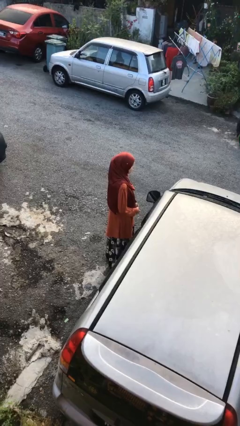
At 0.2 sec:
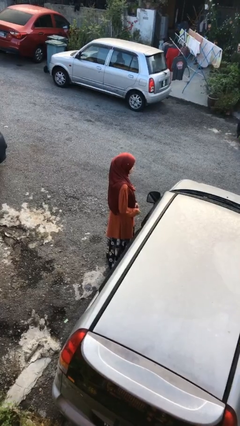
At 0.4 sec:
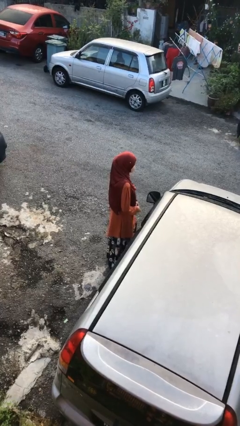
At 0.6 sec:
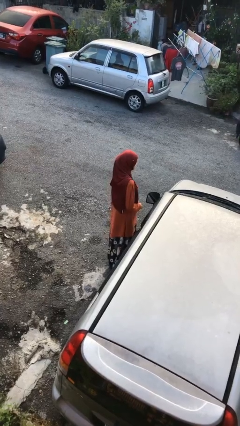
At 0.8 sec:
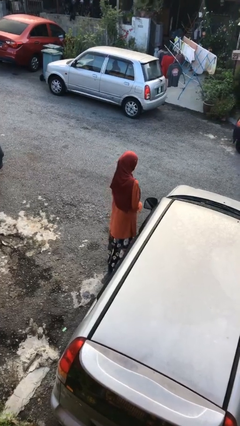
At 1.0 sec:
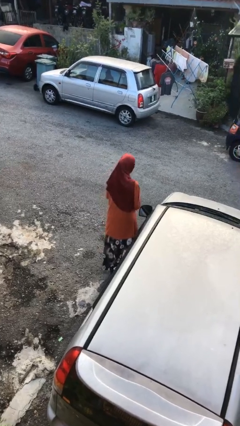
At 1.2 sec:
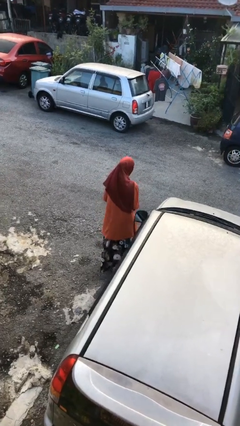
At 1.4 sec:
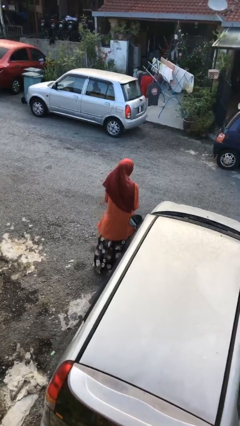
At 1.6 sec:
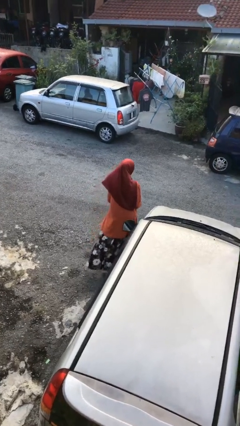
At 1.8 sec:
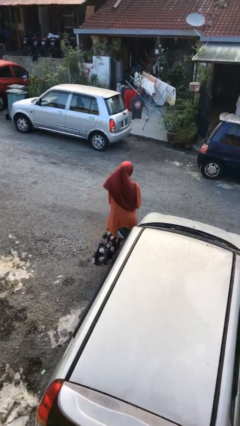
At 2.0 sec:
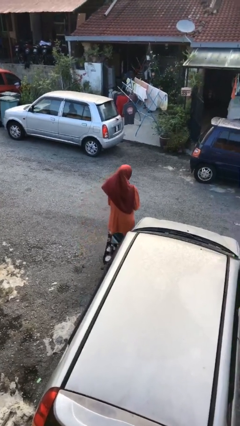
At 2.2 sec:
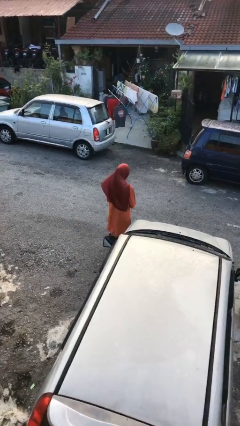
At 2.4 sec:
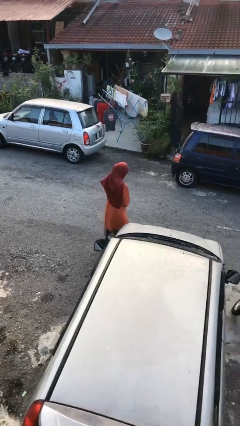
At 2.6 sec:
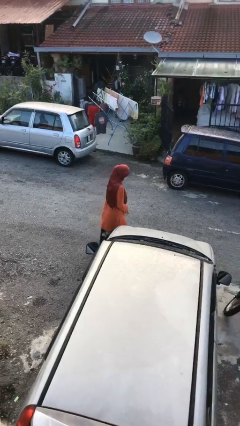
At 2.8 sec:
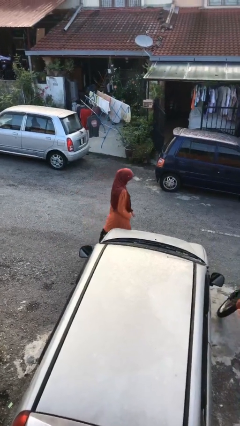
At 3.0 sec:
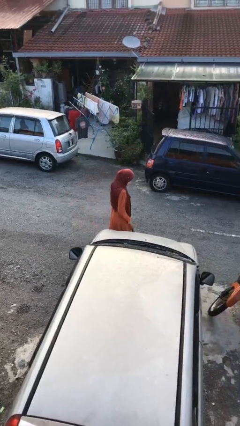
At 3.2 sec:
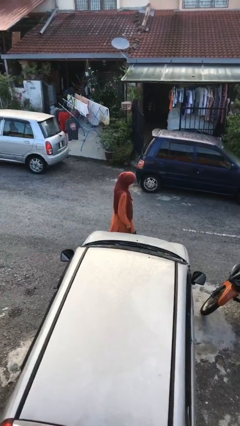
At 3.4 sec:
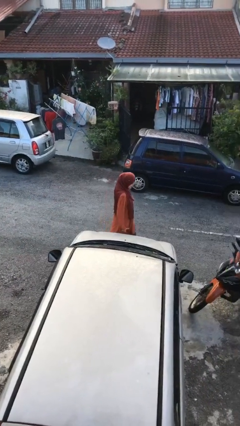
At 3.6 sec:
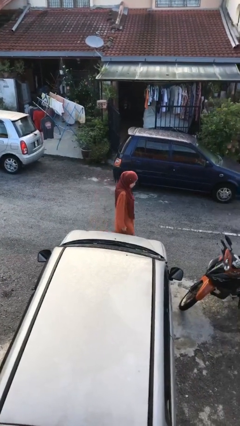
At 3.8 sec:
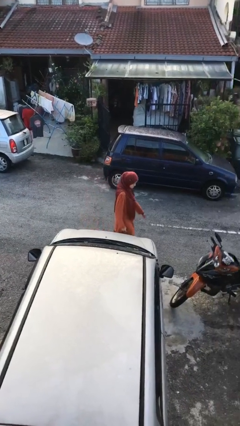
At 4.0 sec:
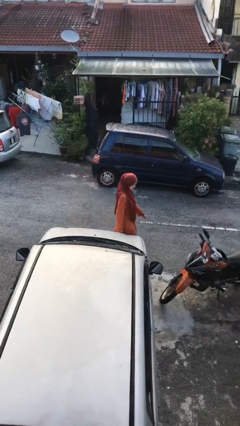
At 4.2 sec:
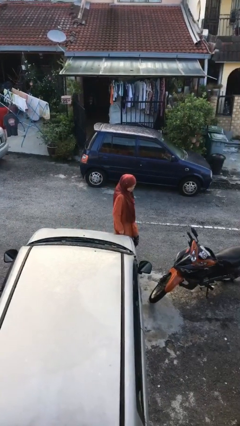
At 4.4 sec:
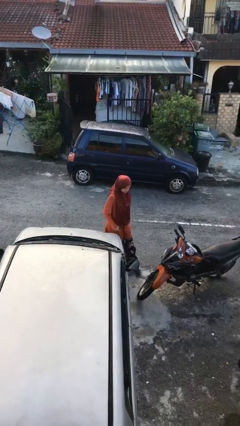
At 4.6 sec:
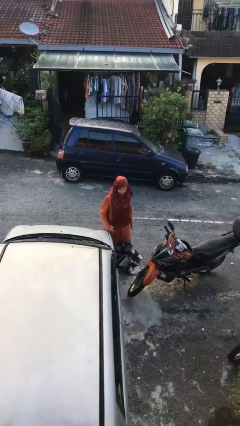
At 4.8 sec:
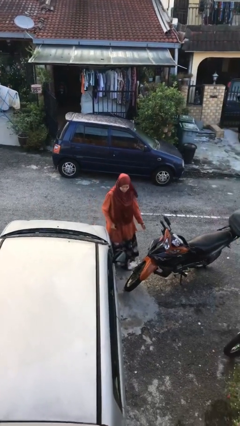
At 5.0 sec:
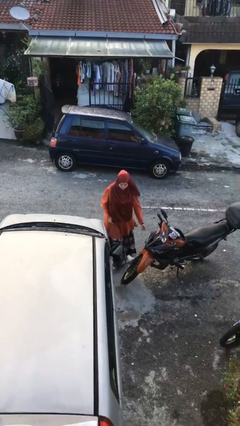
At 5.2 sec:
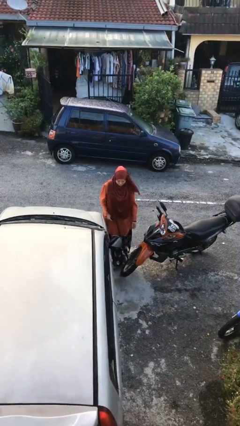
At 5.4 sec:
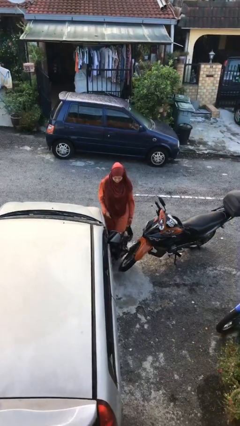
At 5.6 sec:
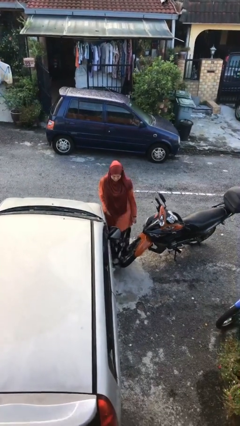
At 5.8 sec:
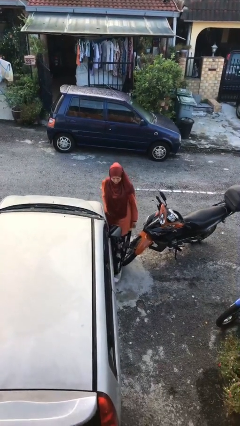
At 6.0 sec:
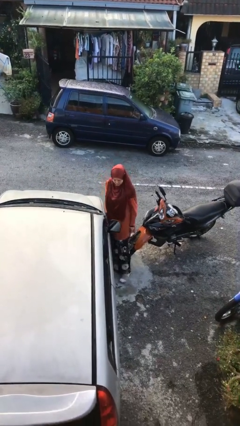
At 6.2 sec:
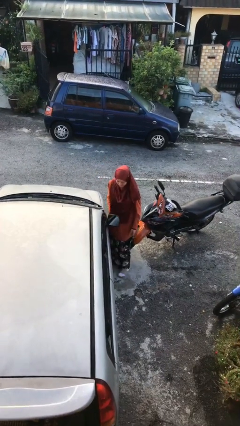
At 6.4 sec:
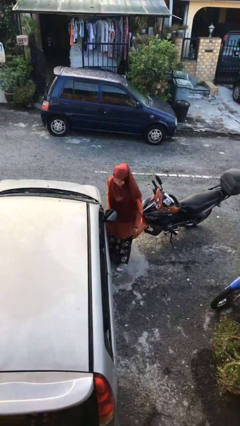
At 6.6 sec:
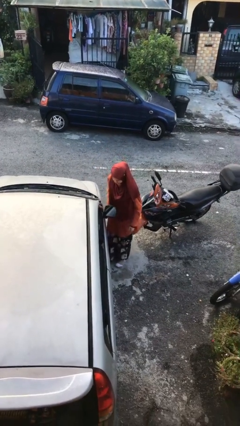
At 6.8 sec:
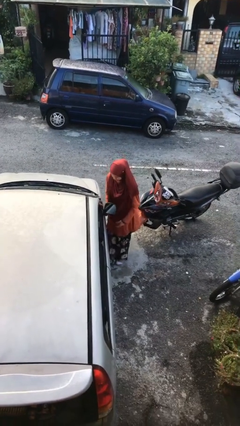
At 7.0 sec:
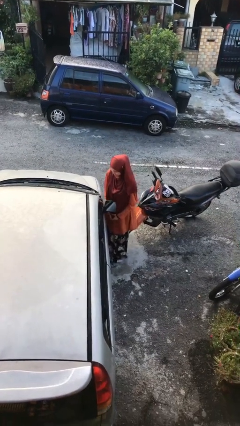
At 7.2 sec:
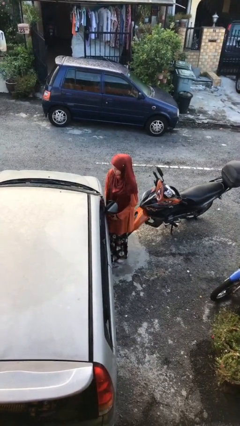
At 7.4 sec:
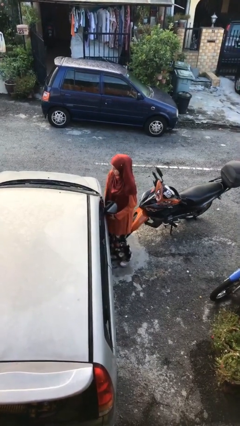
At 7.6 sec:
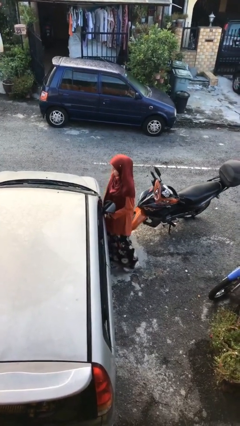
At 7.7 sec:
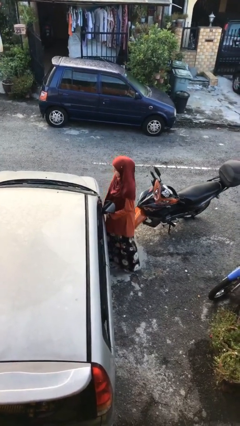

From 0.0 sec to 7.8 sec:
person walks around car

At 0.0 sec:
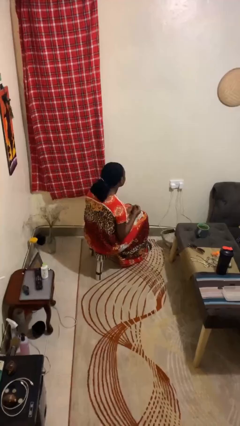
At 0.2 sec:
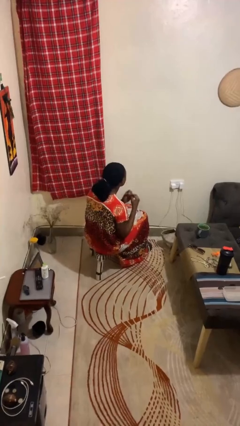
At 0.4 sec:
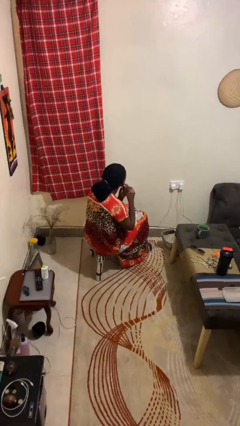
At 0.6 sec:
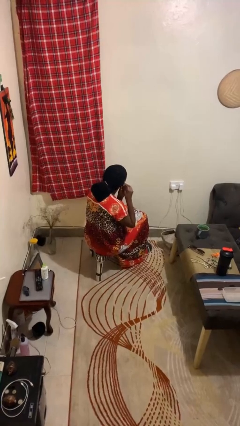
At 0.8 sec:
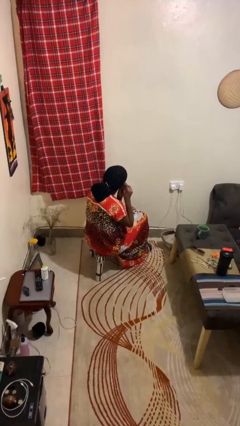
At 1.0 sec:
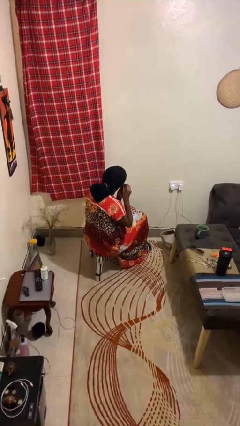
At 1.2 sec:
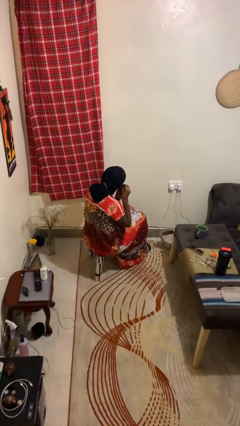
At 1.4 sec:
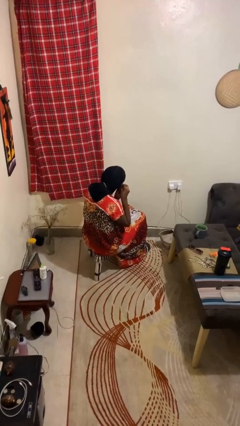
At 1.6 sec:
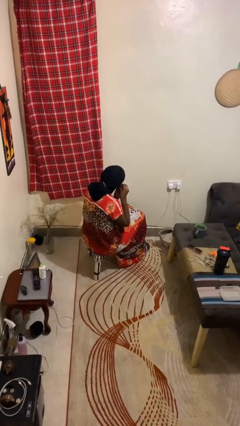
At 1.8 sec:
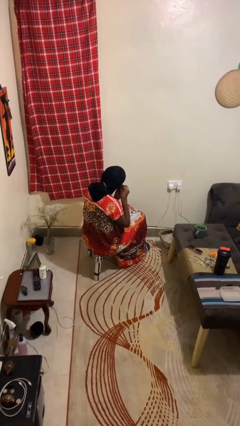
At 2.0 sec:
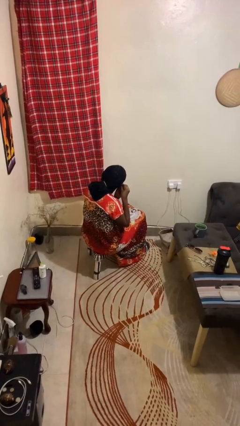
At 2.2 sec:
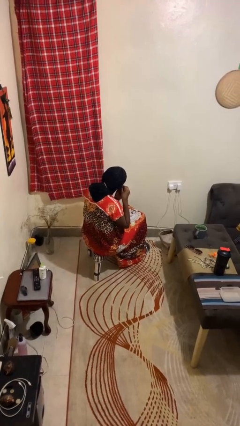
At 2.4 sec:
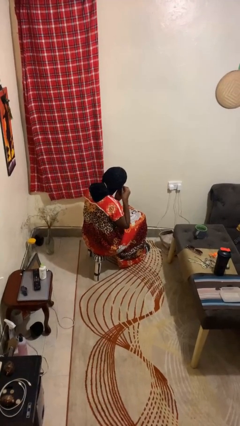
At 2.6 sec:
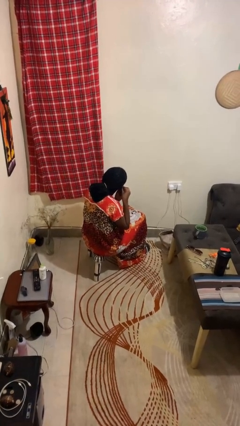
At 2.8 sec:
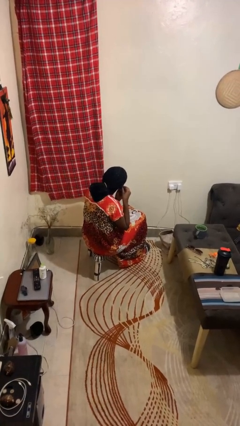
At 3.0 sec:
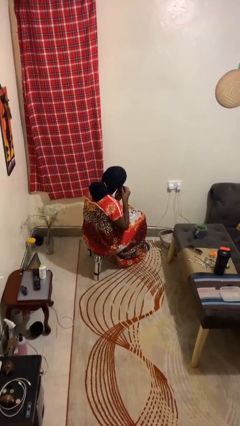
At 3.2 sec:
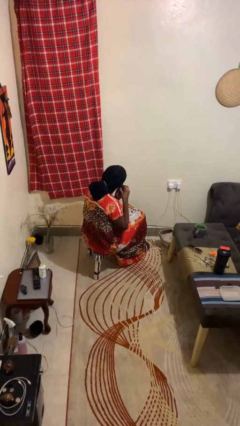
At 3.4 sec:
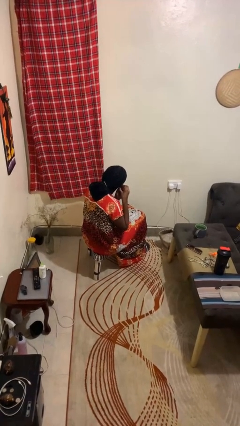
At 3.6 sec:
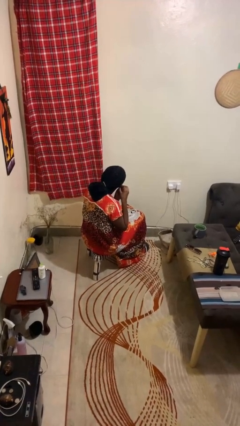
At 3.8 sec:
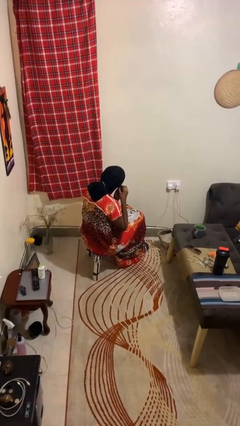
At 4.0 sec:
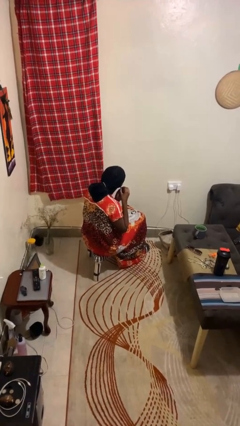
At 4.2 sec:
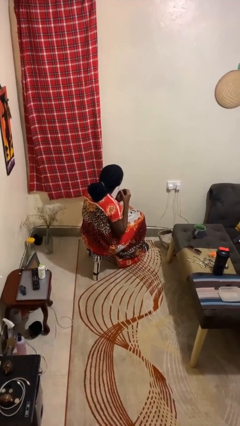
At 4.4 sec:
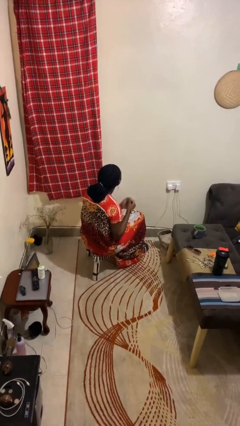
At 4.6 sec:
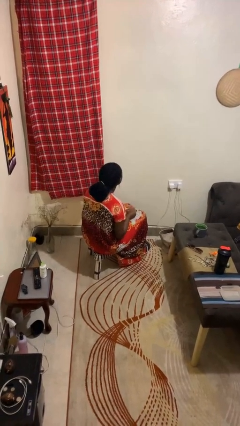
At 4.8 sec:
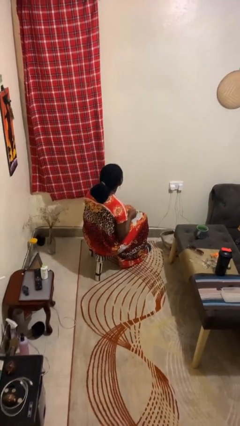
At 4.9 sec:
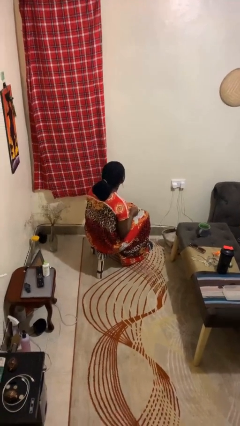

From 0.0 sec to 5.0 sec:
person puts on earrings

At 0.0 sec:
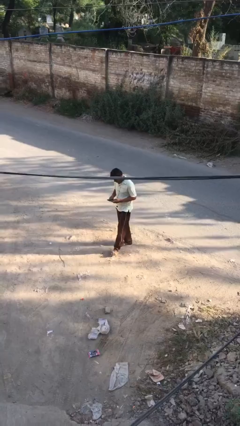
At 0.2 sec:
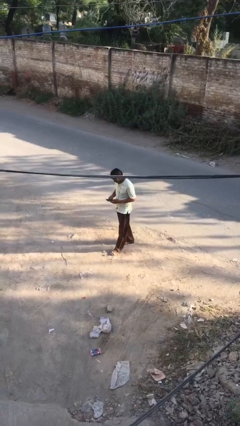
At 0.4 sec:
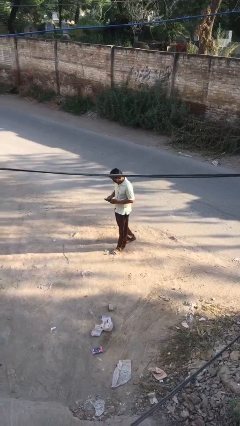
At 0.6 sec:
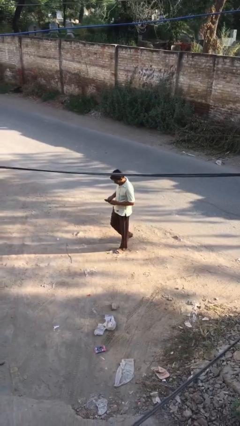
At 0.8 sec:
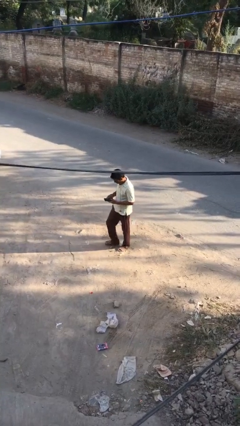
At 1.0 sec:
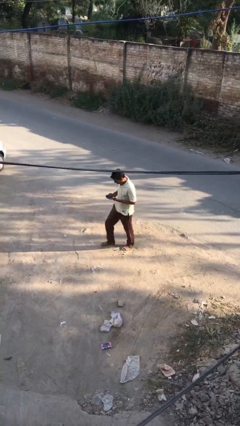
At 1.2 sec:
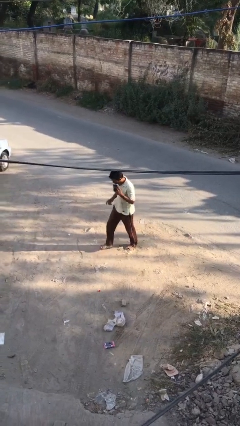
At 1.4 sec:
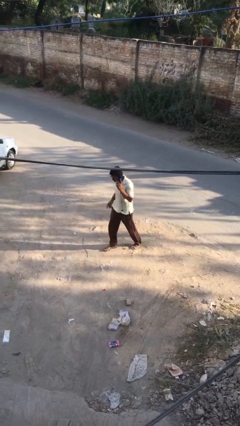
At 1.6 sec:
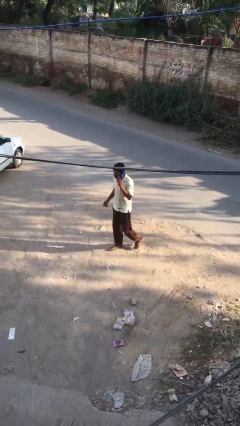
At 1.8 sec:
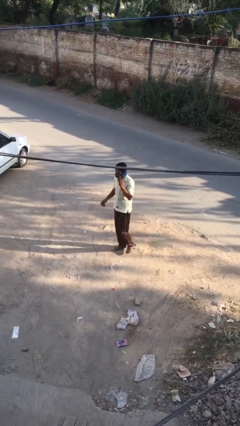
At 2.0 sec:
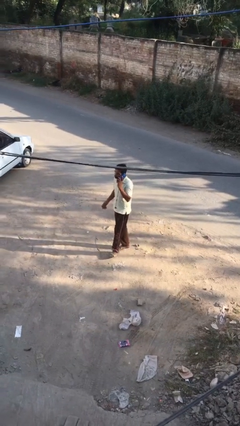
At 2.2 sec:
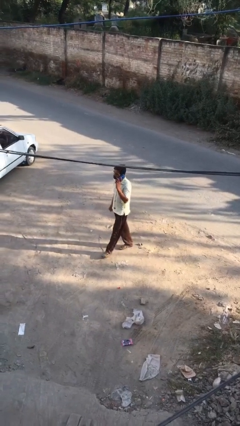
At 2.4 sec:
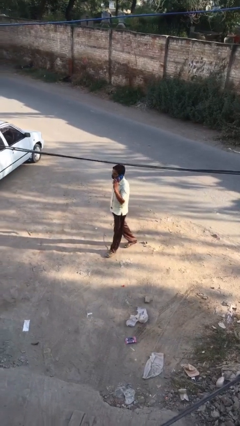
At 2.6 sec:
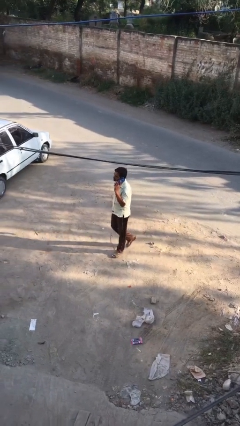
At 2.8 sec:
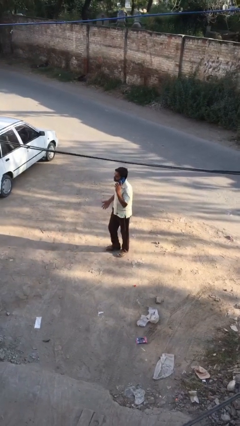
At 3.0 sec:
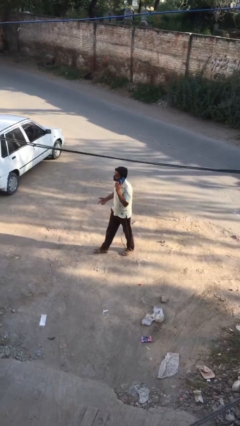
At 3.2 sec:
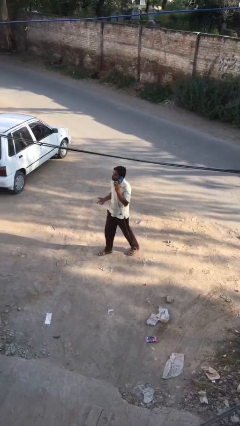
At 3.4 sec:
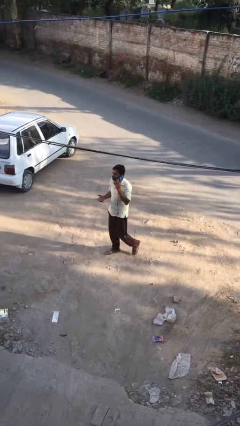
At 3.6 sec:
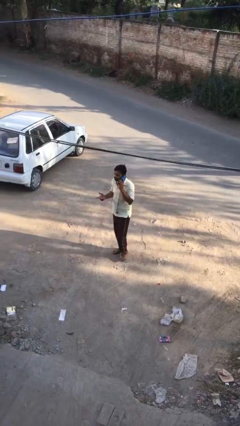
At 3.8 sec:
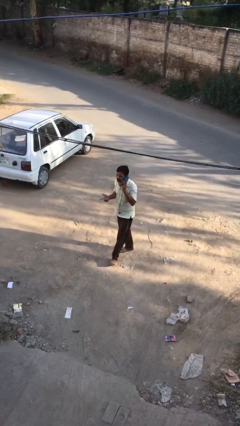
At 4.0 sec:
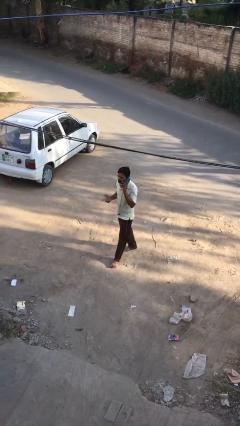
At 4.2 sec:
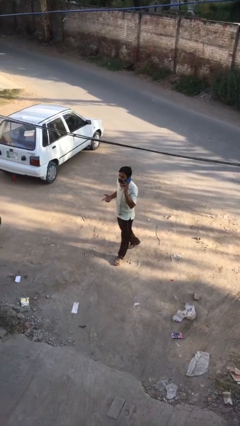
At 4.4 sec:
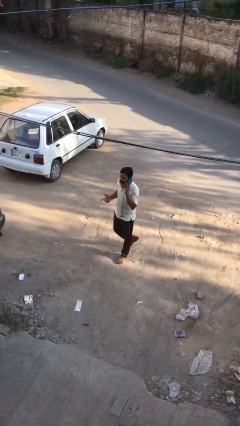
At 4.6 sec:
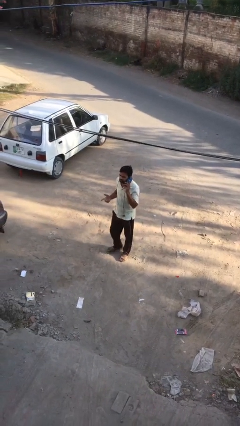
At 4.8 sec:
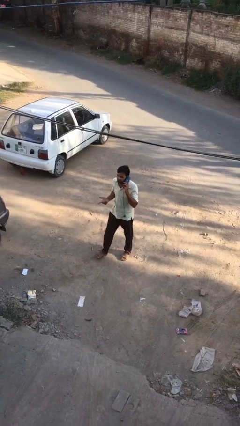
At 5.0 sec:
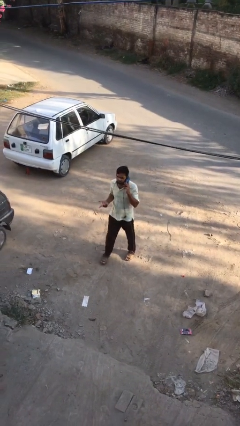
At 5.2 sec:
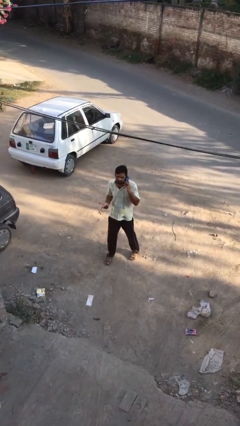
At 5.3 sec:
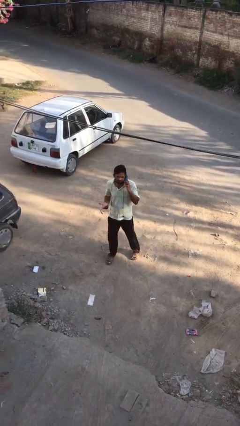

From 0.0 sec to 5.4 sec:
person talks on phone

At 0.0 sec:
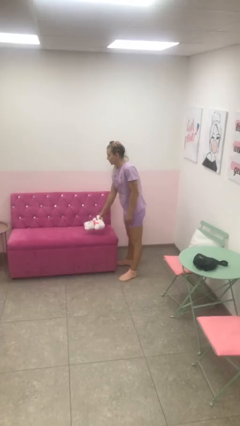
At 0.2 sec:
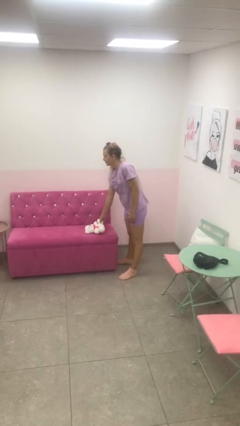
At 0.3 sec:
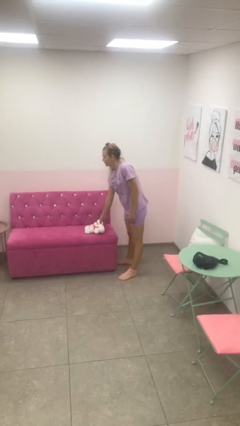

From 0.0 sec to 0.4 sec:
person puts down object on couch
